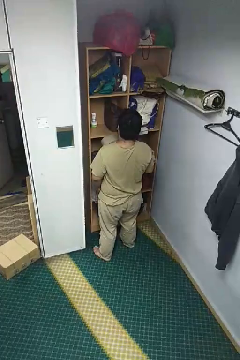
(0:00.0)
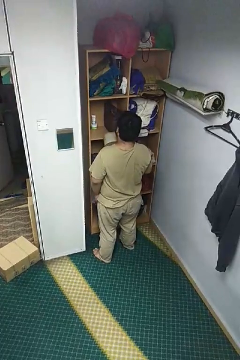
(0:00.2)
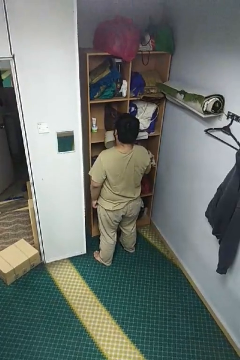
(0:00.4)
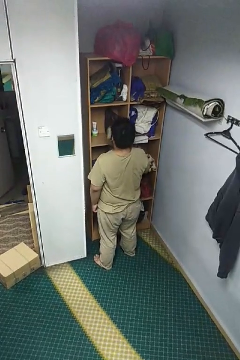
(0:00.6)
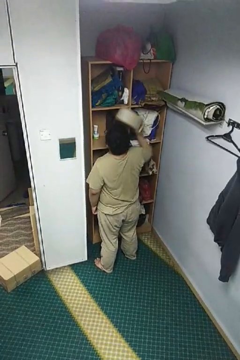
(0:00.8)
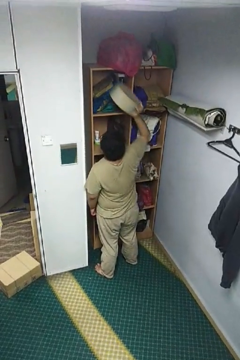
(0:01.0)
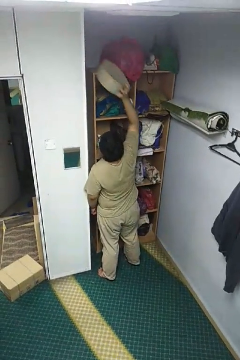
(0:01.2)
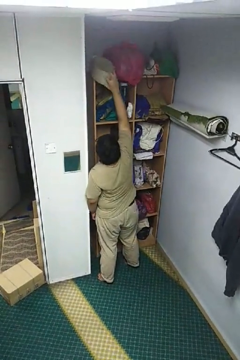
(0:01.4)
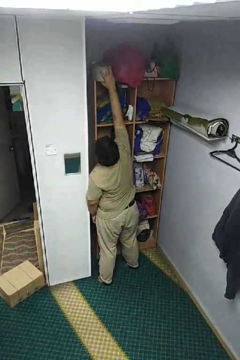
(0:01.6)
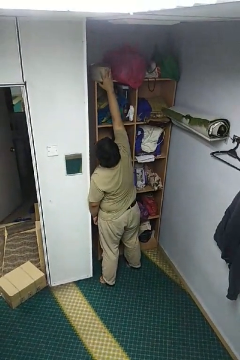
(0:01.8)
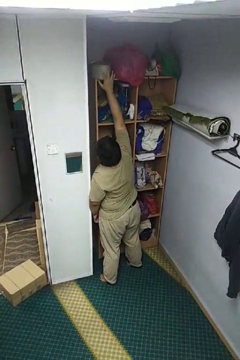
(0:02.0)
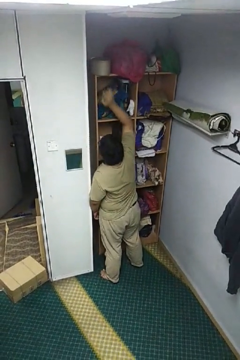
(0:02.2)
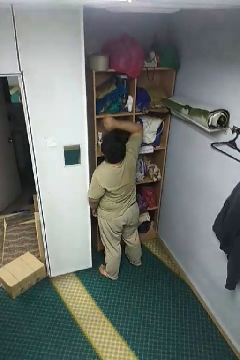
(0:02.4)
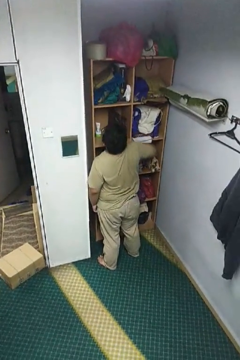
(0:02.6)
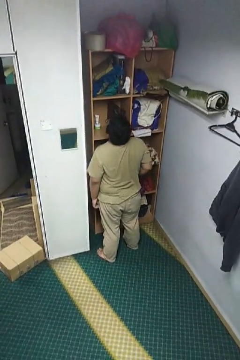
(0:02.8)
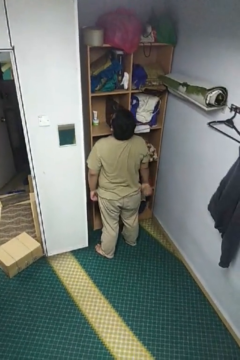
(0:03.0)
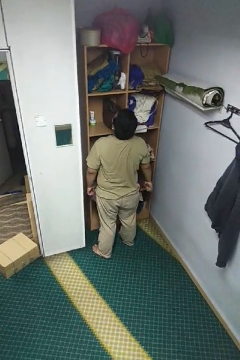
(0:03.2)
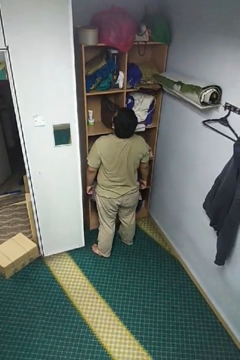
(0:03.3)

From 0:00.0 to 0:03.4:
person puts down object on shelf

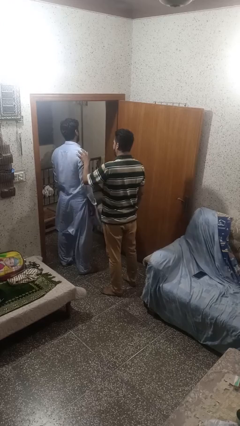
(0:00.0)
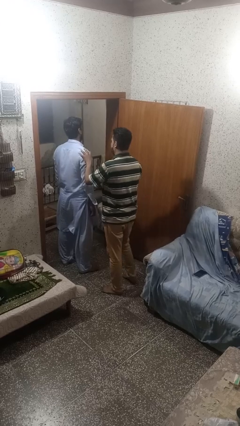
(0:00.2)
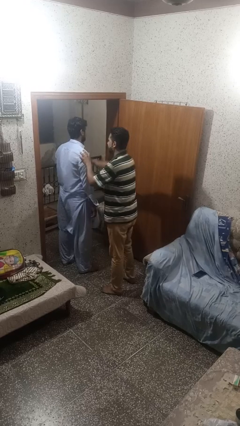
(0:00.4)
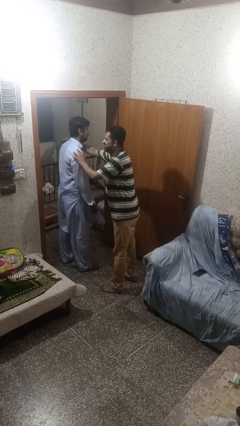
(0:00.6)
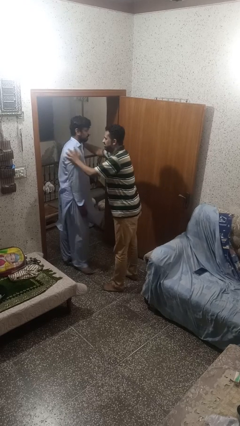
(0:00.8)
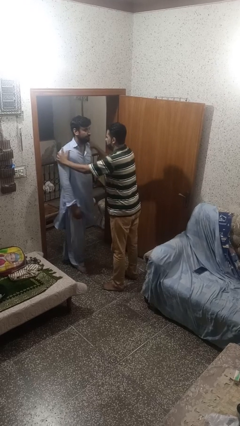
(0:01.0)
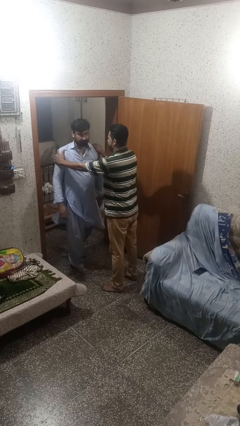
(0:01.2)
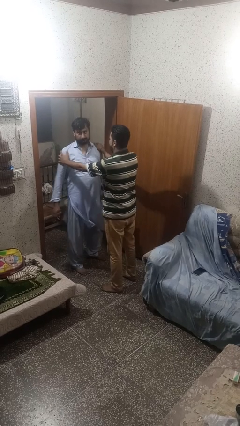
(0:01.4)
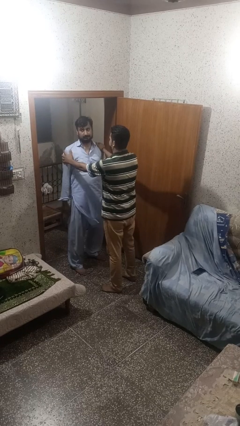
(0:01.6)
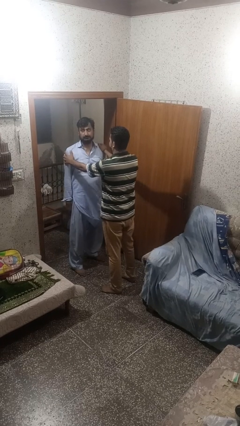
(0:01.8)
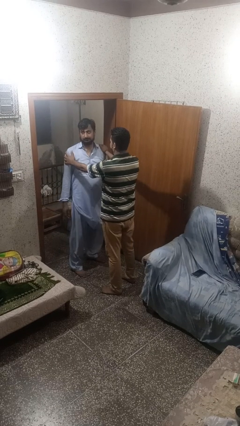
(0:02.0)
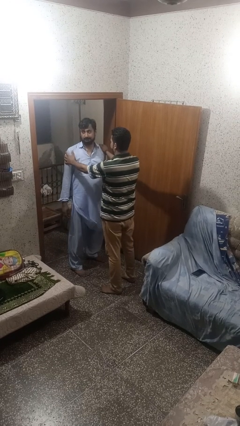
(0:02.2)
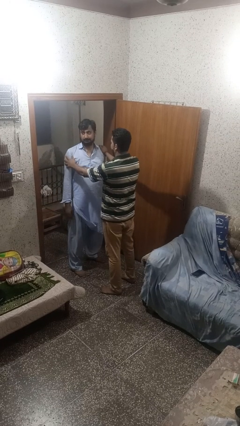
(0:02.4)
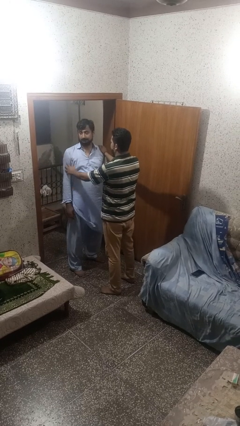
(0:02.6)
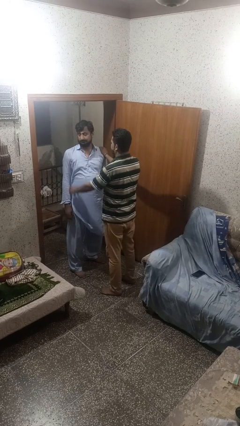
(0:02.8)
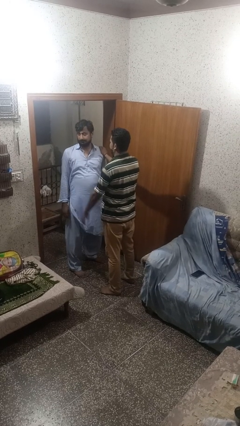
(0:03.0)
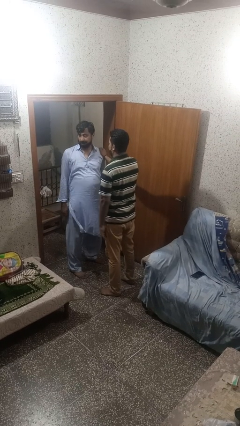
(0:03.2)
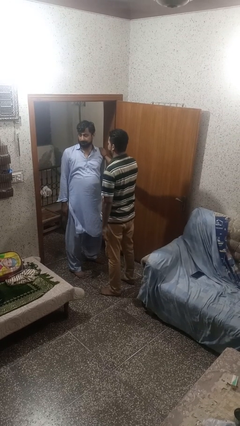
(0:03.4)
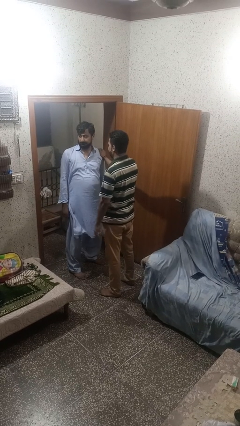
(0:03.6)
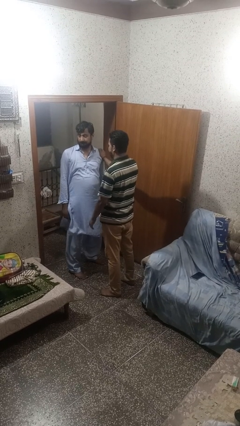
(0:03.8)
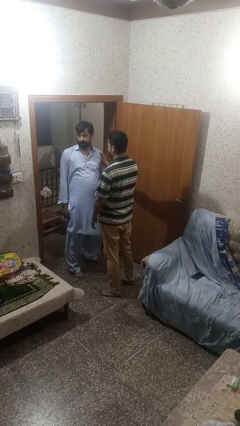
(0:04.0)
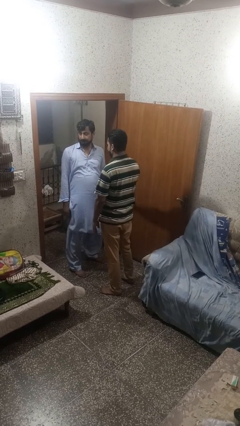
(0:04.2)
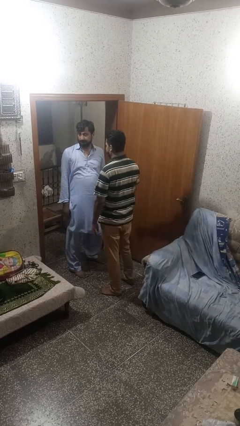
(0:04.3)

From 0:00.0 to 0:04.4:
person spins person around

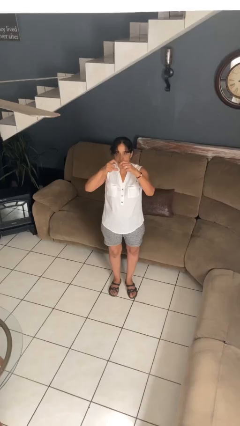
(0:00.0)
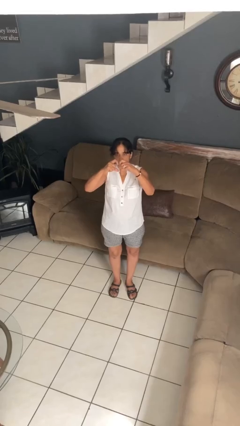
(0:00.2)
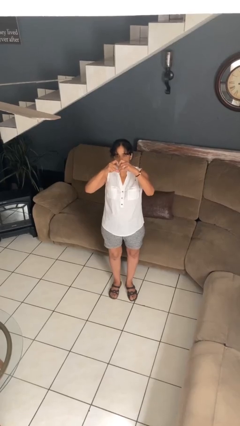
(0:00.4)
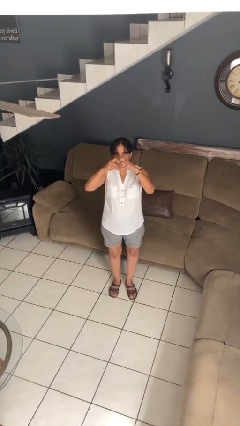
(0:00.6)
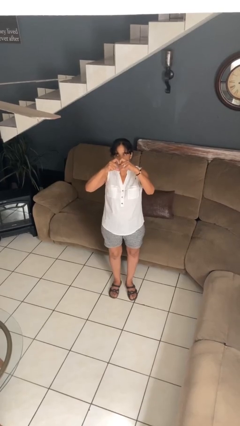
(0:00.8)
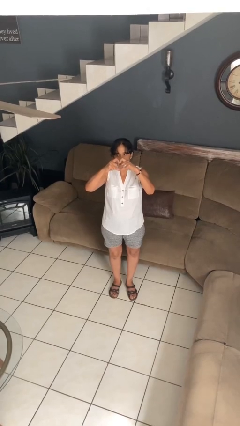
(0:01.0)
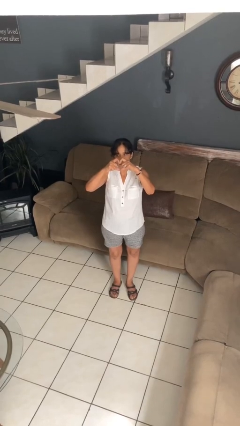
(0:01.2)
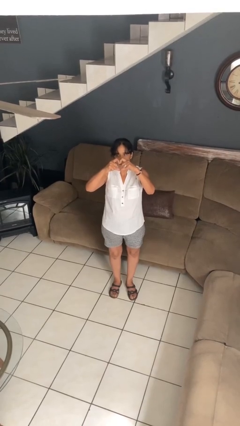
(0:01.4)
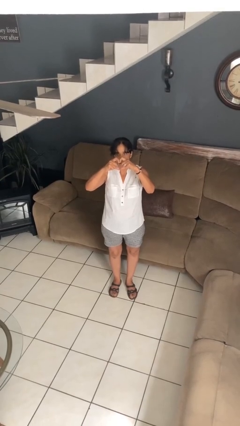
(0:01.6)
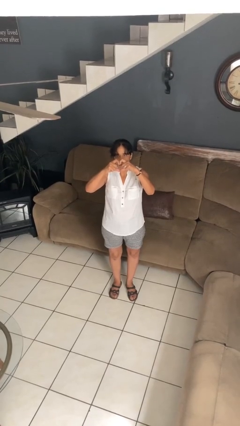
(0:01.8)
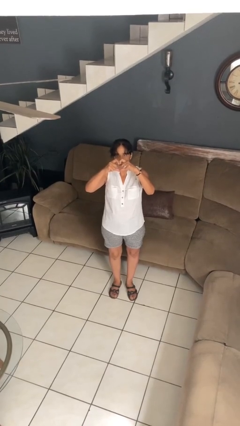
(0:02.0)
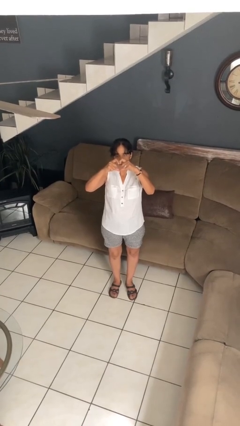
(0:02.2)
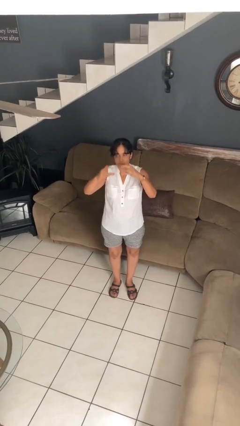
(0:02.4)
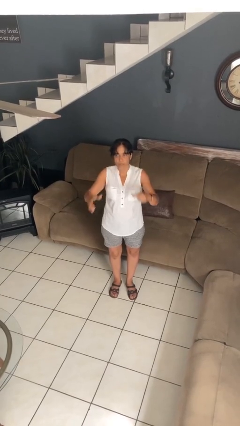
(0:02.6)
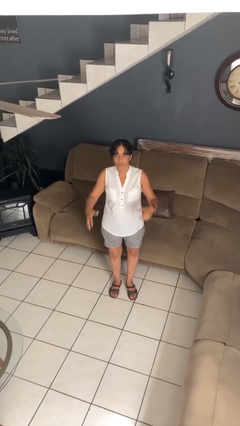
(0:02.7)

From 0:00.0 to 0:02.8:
person gestures heart

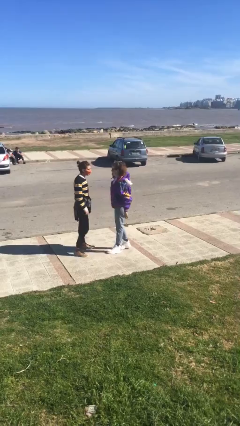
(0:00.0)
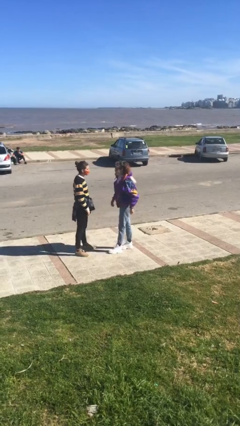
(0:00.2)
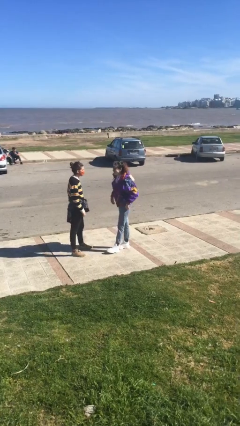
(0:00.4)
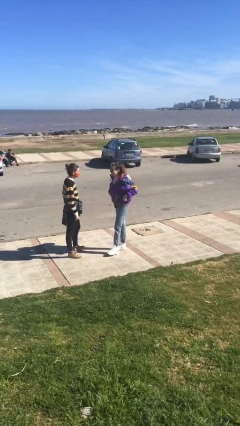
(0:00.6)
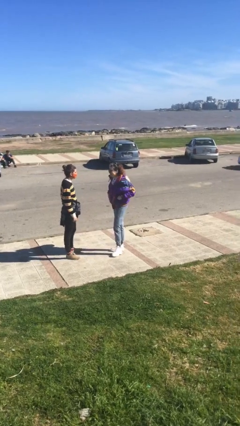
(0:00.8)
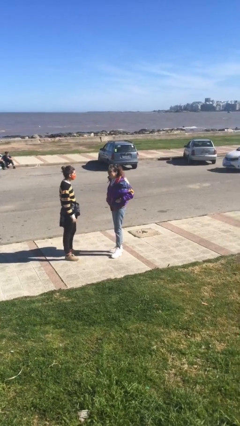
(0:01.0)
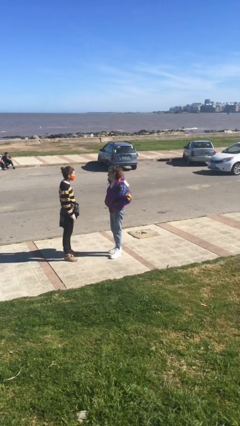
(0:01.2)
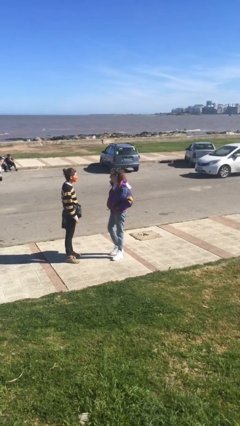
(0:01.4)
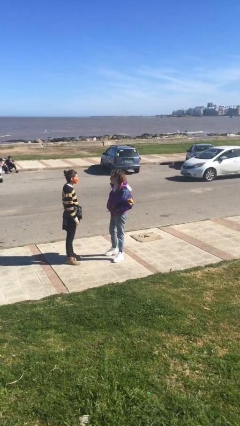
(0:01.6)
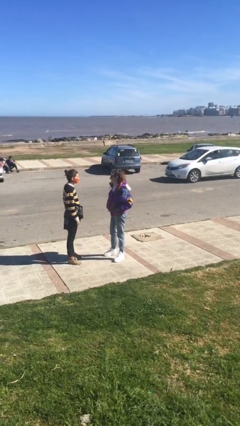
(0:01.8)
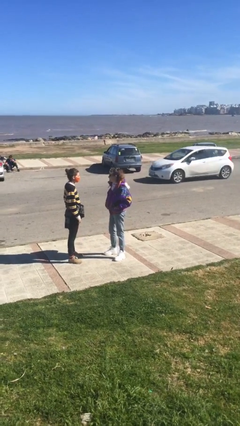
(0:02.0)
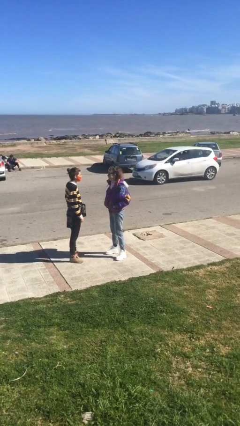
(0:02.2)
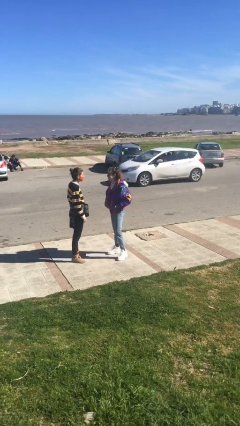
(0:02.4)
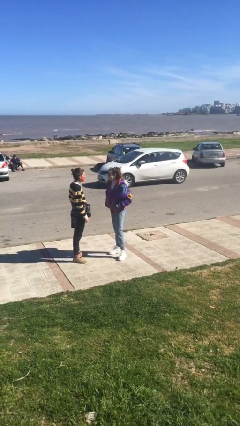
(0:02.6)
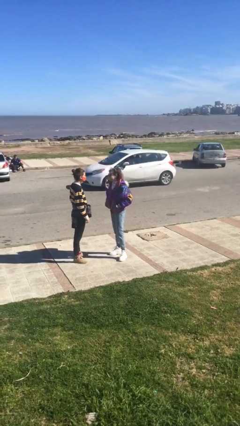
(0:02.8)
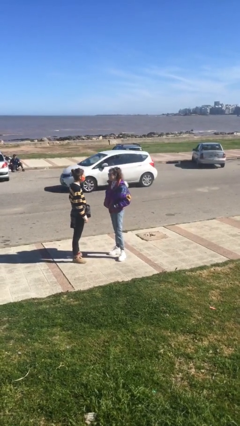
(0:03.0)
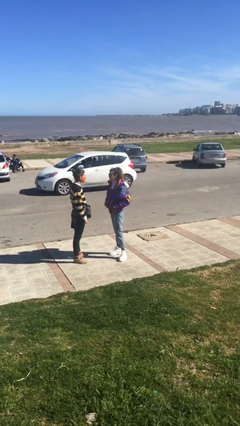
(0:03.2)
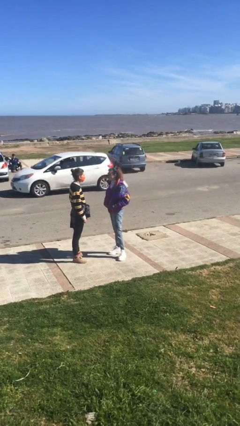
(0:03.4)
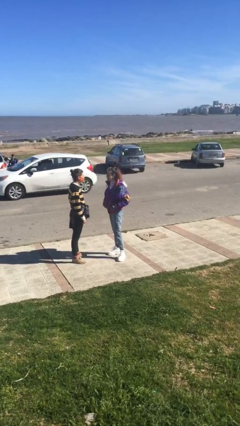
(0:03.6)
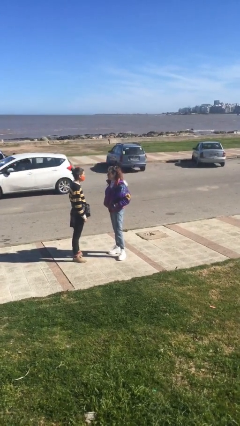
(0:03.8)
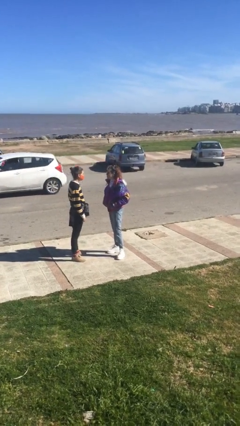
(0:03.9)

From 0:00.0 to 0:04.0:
person talks to person

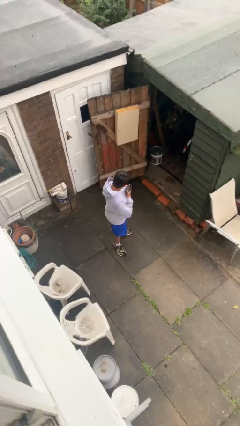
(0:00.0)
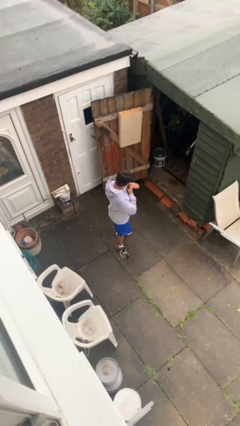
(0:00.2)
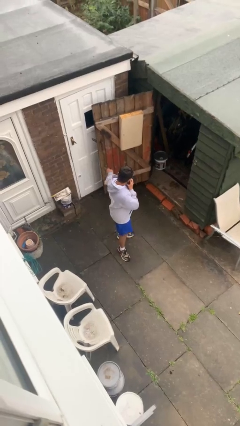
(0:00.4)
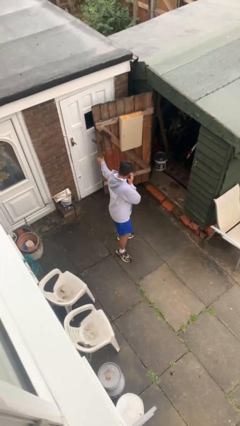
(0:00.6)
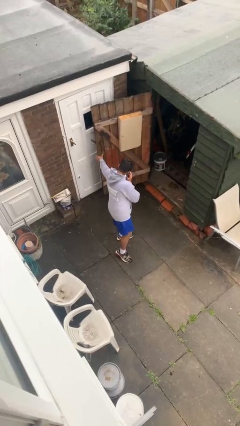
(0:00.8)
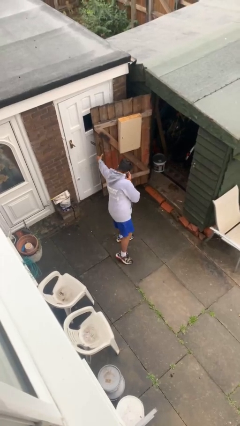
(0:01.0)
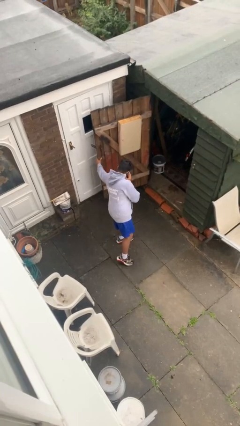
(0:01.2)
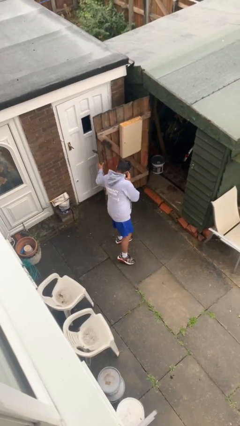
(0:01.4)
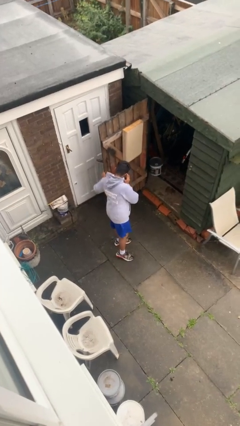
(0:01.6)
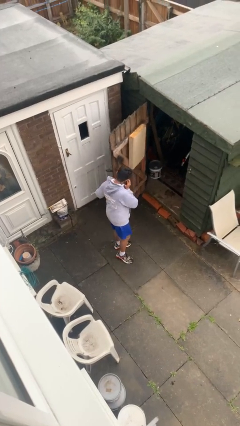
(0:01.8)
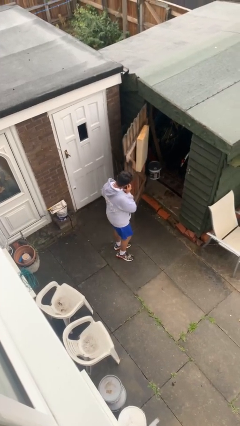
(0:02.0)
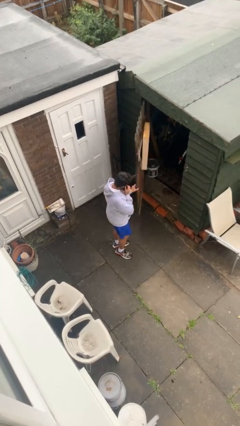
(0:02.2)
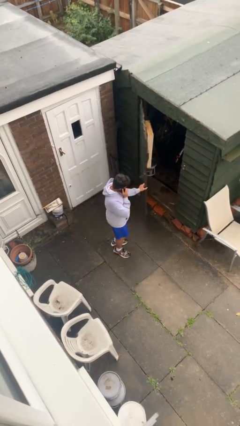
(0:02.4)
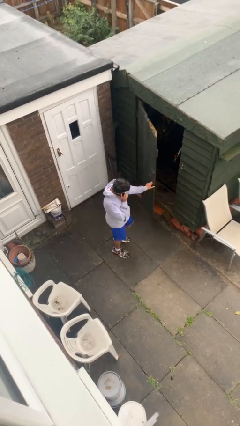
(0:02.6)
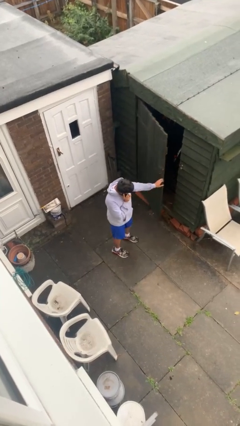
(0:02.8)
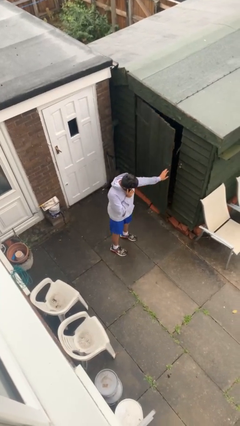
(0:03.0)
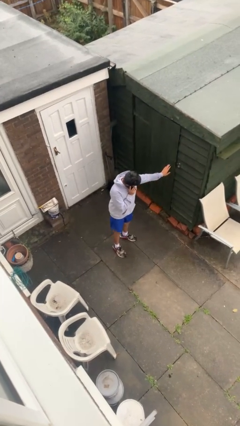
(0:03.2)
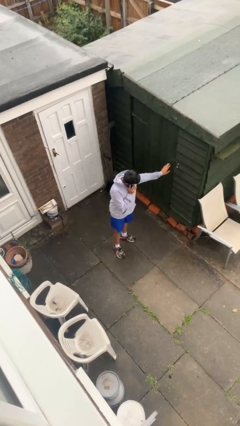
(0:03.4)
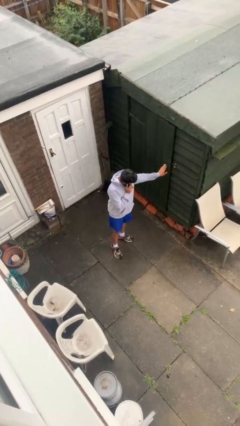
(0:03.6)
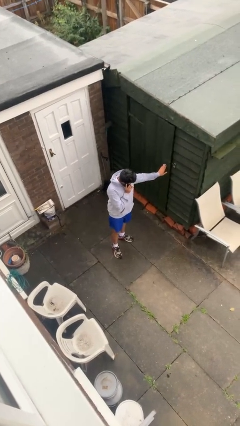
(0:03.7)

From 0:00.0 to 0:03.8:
person closes facility door
